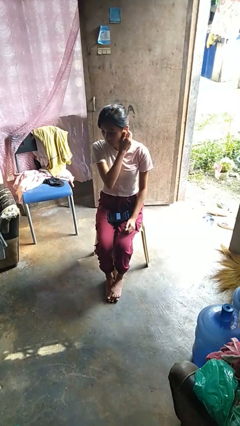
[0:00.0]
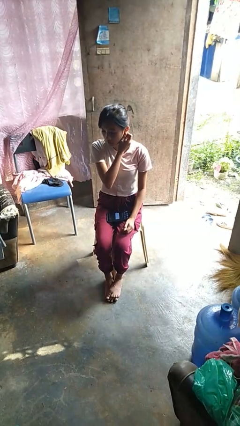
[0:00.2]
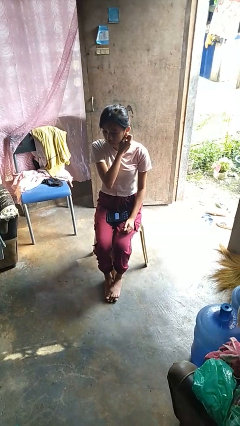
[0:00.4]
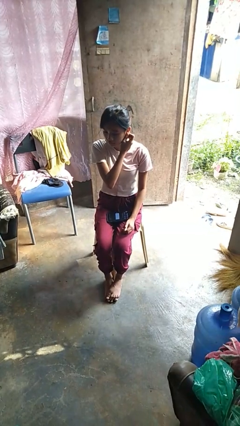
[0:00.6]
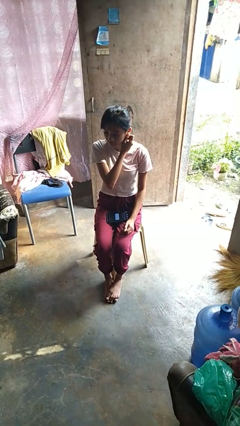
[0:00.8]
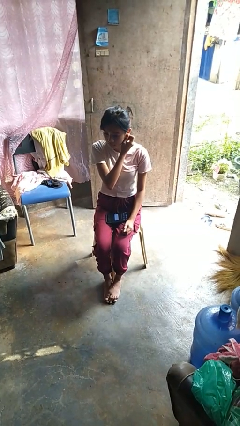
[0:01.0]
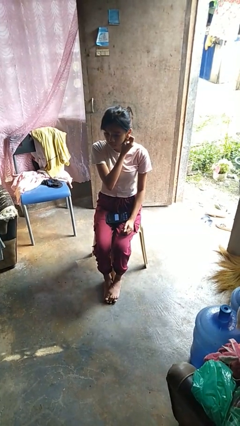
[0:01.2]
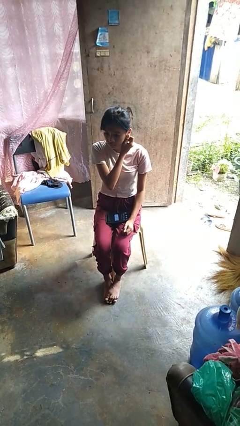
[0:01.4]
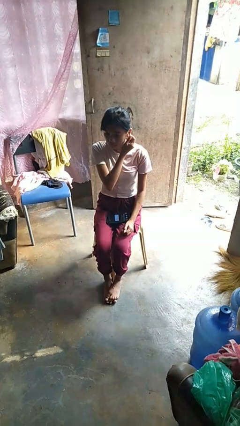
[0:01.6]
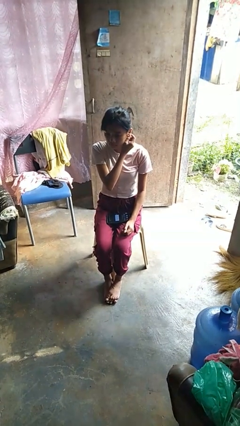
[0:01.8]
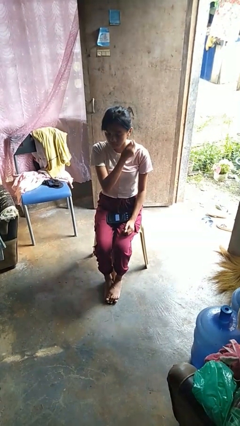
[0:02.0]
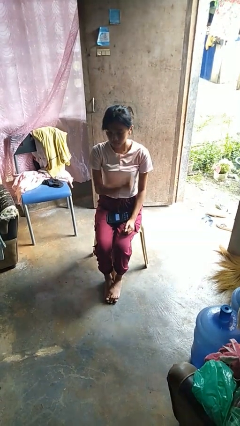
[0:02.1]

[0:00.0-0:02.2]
person touches earlobe

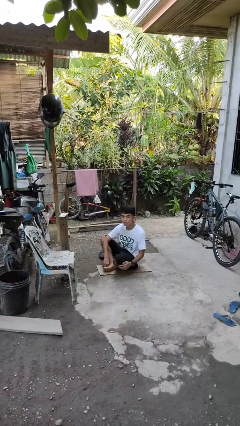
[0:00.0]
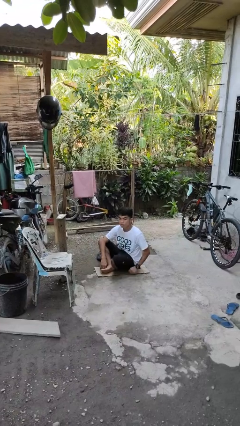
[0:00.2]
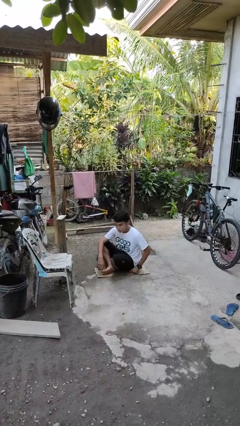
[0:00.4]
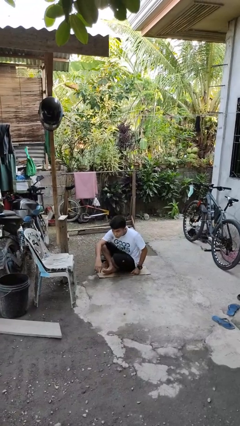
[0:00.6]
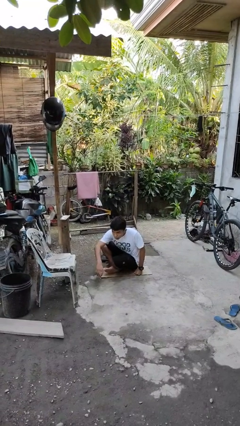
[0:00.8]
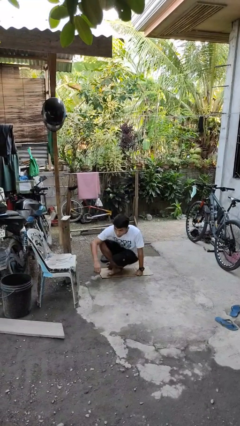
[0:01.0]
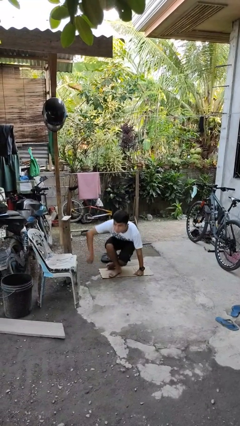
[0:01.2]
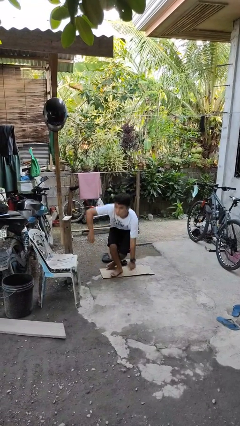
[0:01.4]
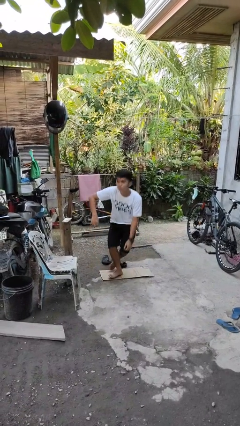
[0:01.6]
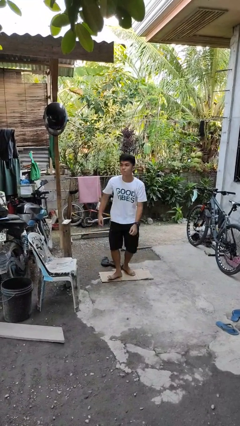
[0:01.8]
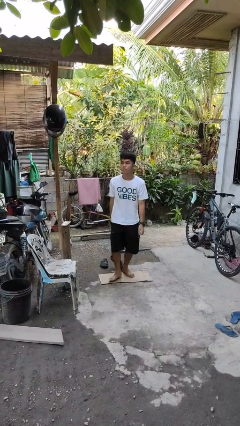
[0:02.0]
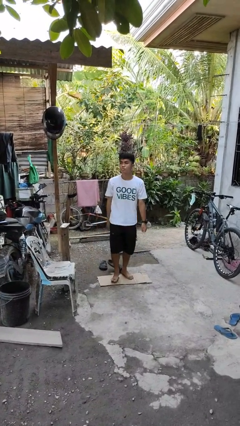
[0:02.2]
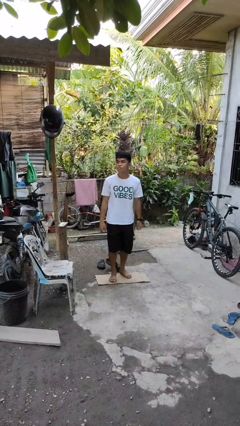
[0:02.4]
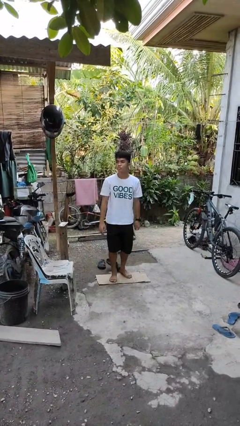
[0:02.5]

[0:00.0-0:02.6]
person stands up from floor

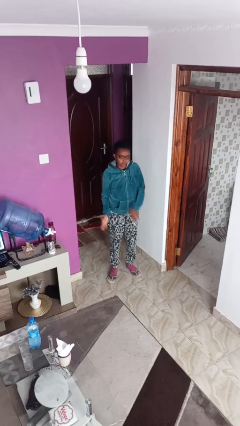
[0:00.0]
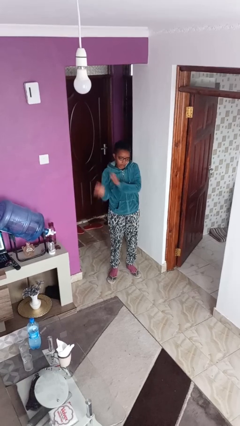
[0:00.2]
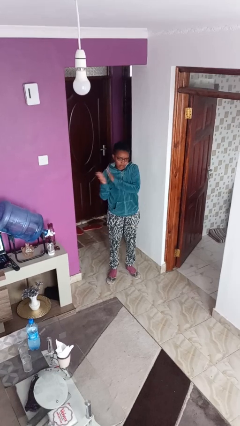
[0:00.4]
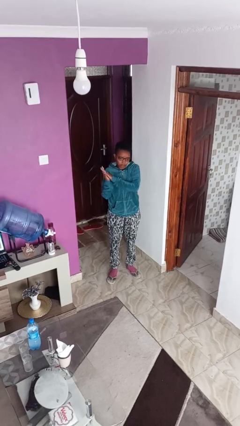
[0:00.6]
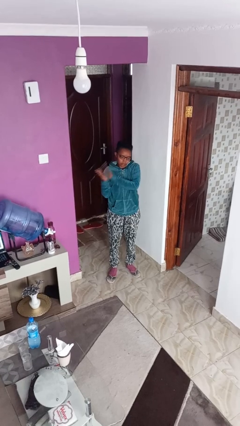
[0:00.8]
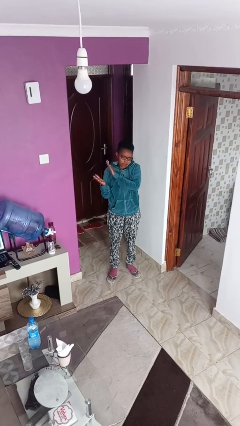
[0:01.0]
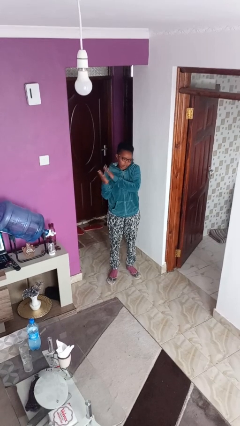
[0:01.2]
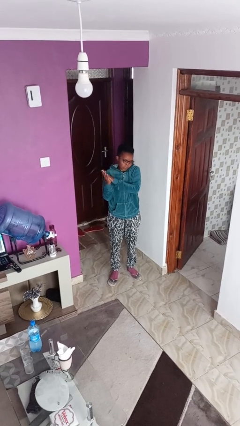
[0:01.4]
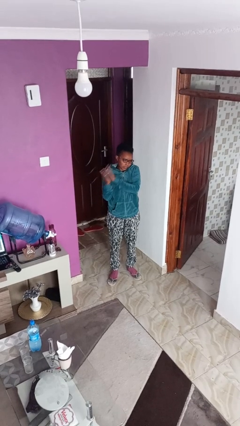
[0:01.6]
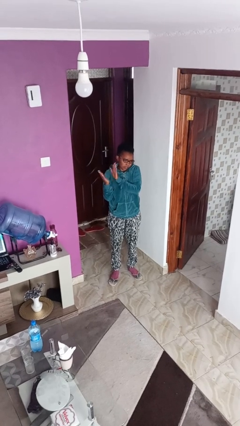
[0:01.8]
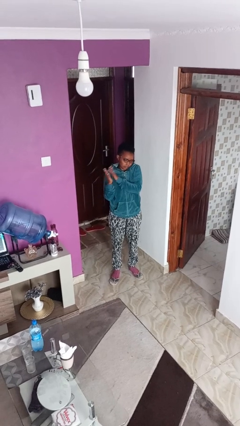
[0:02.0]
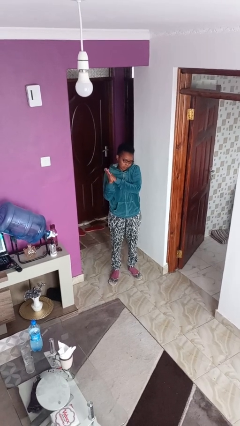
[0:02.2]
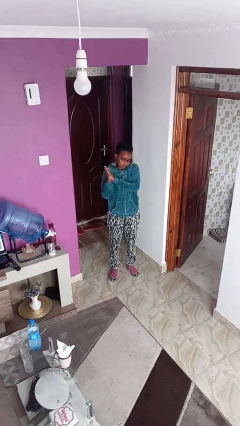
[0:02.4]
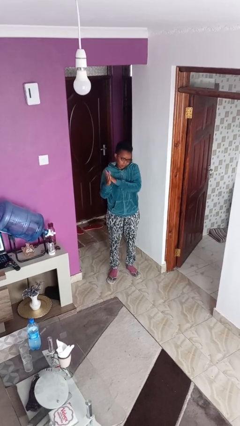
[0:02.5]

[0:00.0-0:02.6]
person claps hands

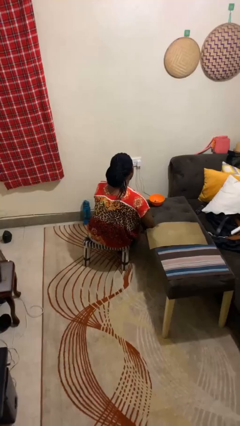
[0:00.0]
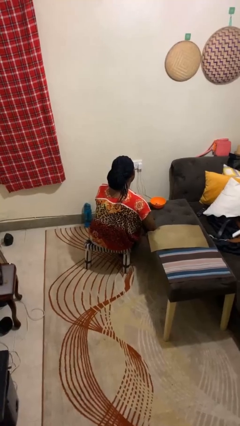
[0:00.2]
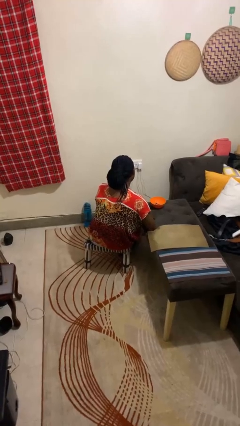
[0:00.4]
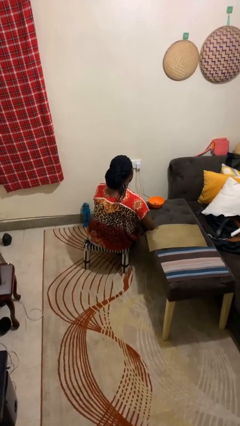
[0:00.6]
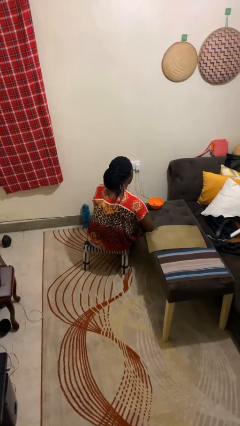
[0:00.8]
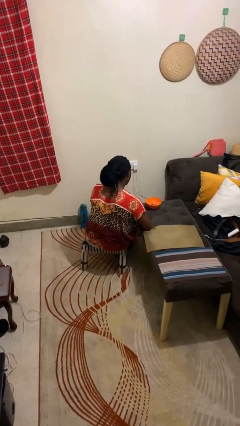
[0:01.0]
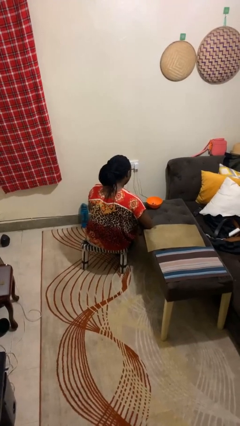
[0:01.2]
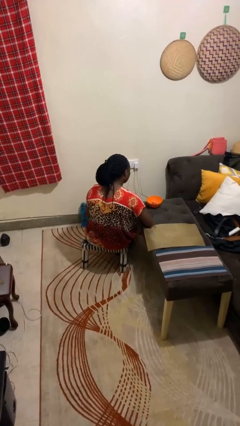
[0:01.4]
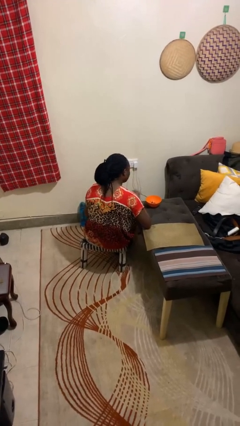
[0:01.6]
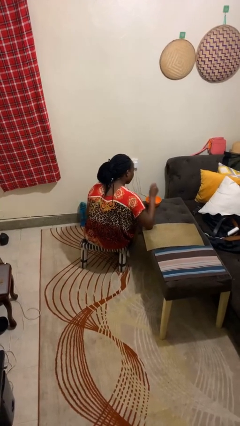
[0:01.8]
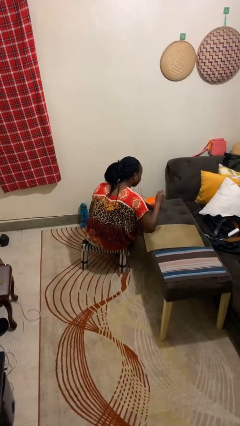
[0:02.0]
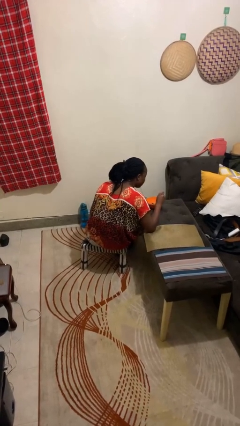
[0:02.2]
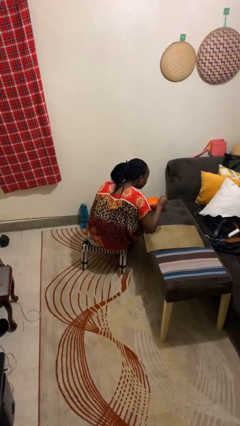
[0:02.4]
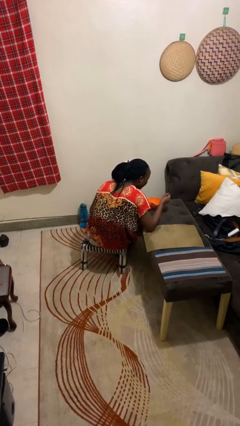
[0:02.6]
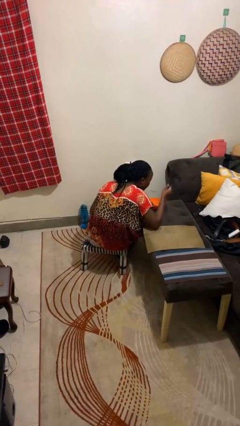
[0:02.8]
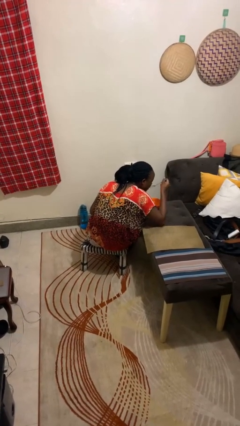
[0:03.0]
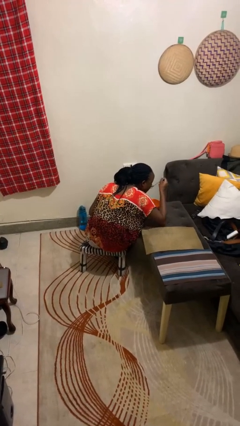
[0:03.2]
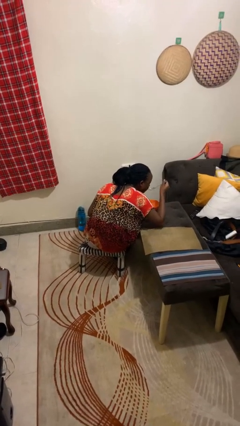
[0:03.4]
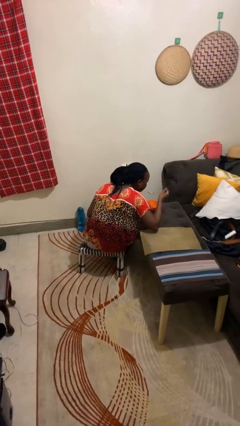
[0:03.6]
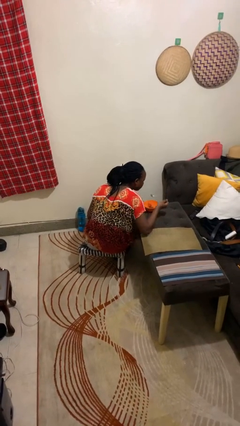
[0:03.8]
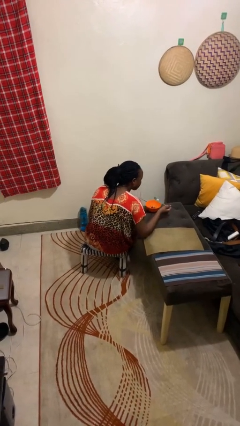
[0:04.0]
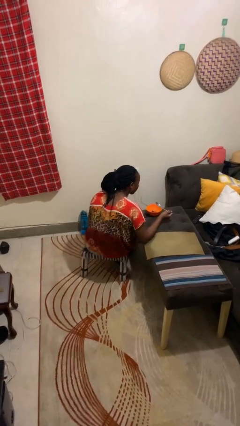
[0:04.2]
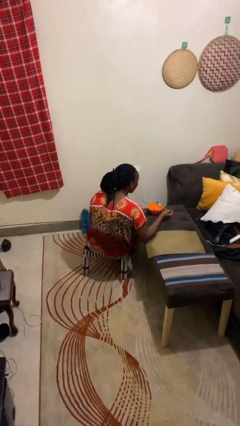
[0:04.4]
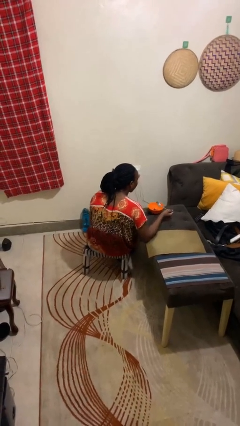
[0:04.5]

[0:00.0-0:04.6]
person eats with utensil

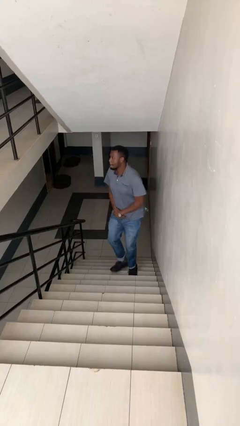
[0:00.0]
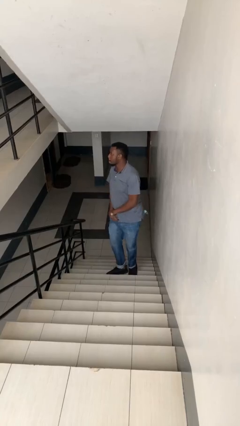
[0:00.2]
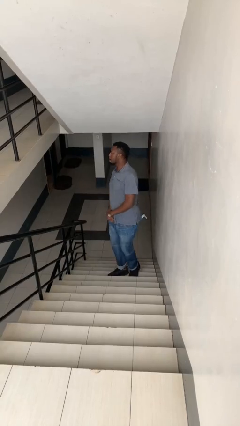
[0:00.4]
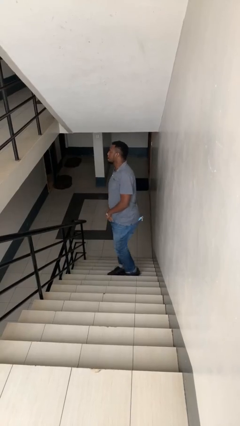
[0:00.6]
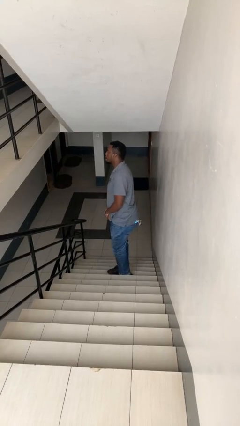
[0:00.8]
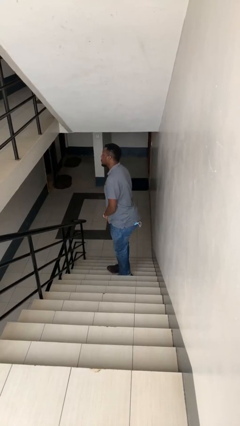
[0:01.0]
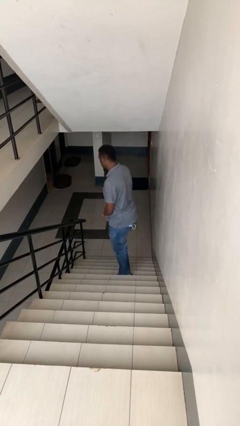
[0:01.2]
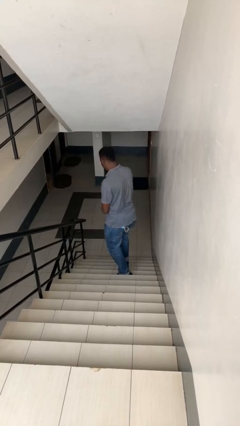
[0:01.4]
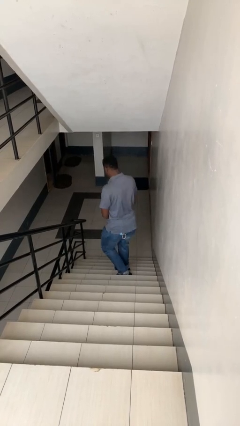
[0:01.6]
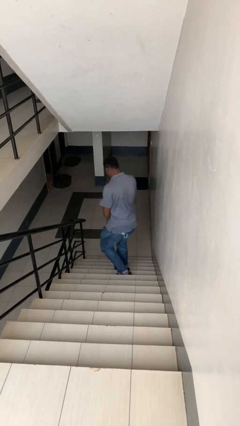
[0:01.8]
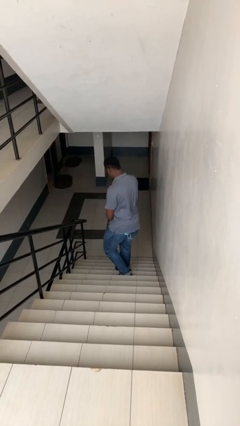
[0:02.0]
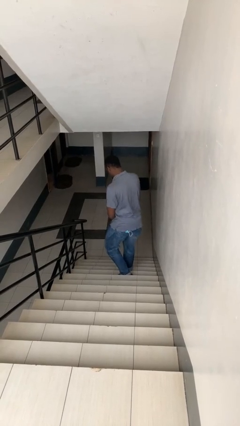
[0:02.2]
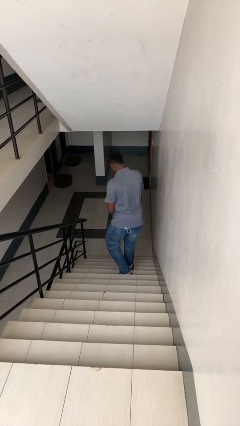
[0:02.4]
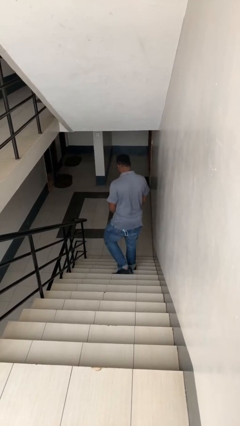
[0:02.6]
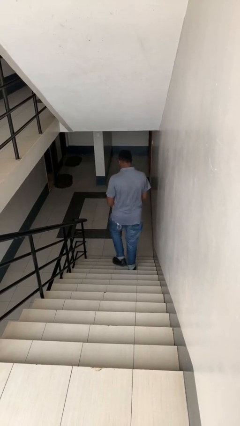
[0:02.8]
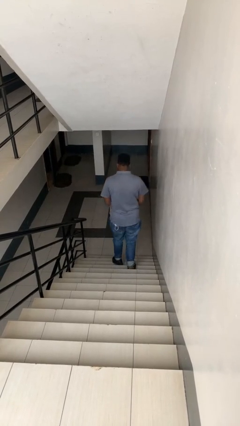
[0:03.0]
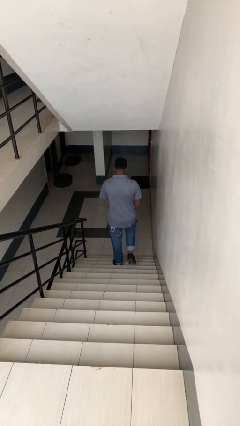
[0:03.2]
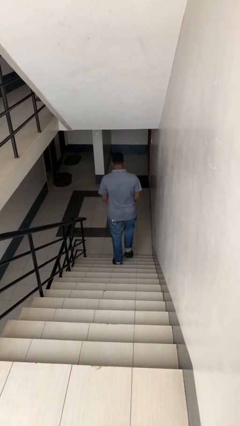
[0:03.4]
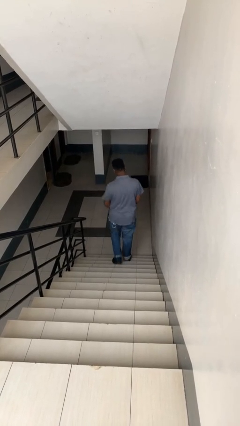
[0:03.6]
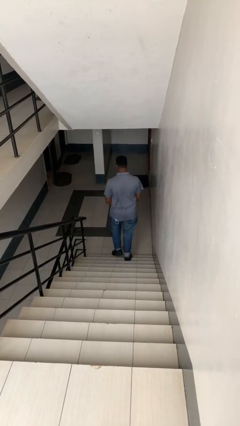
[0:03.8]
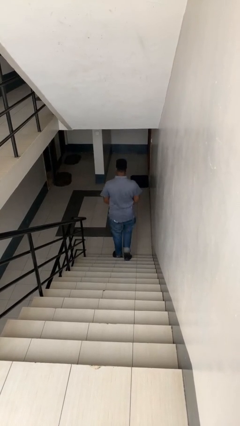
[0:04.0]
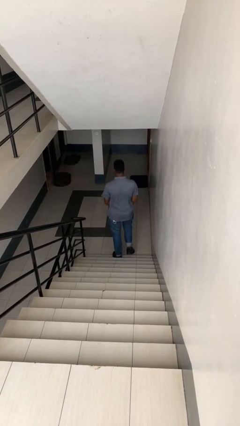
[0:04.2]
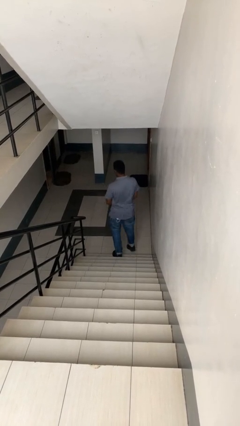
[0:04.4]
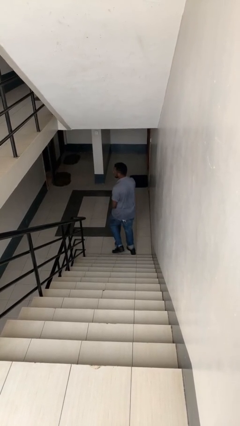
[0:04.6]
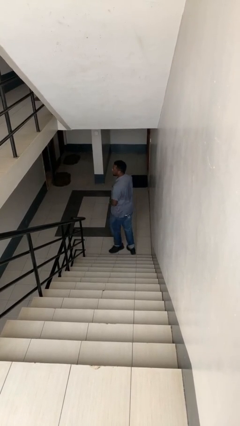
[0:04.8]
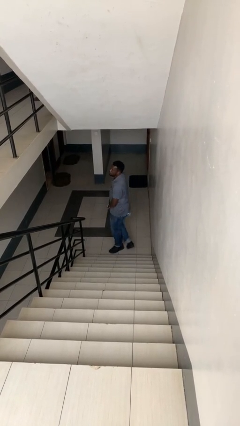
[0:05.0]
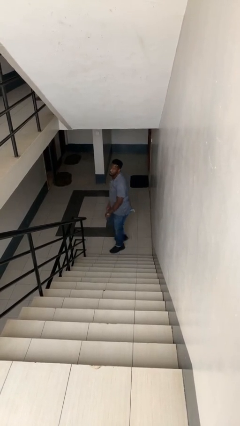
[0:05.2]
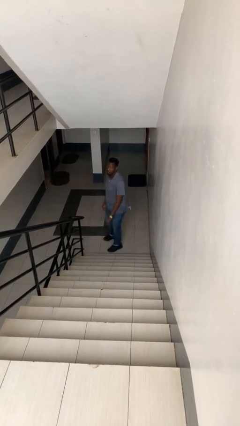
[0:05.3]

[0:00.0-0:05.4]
person climbs down stairs

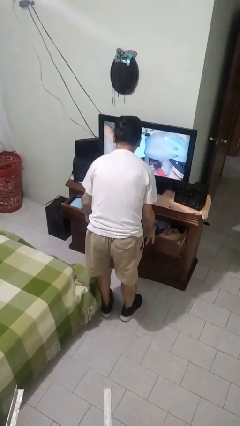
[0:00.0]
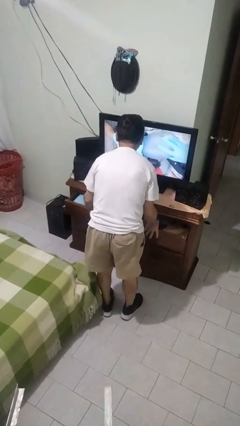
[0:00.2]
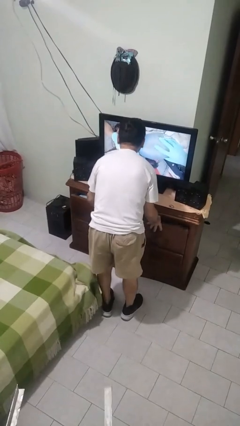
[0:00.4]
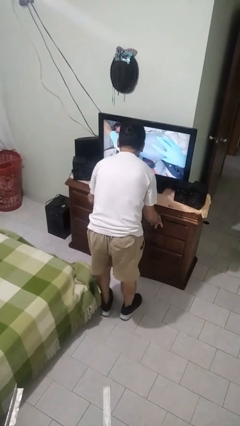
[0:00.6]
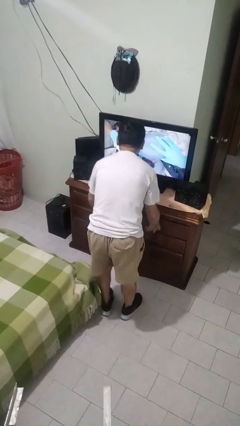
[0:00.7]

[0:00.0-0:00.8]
person closes dresser drawer
